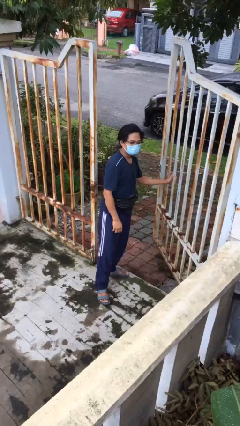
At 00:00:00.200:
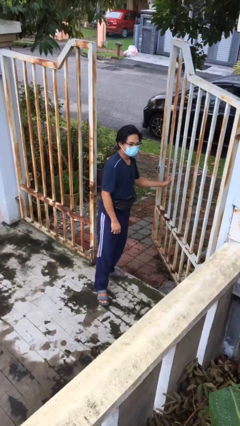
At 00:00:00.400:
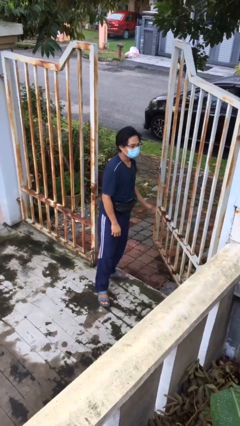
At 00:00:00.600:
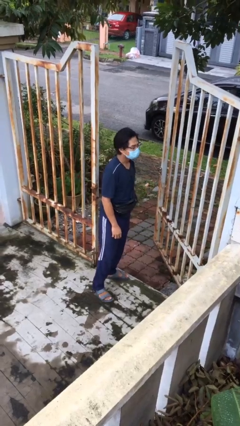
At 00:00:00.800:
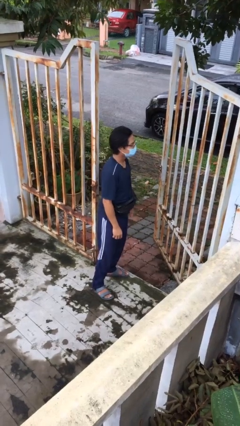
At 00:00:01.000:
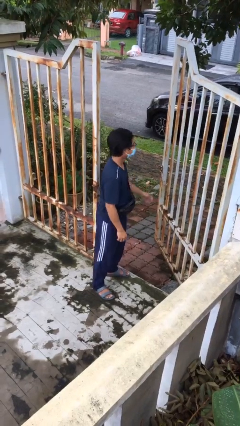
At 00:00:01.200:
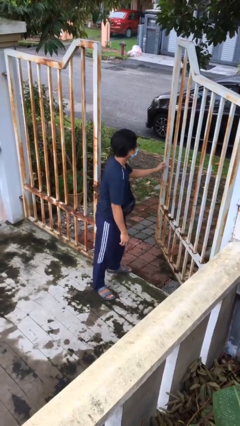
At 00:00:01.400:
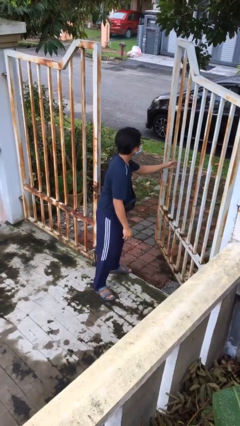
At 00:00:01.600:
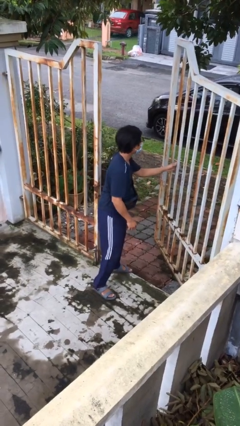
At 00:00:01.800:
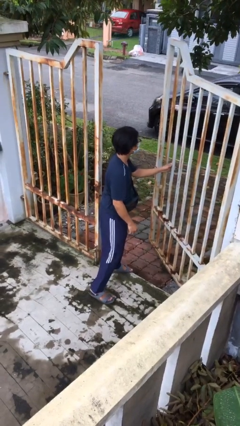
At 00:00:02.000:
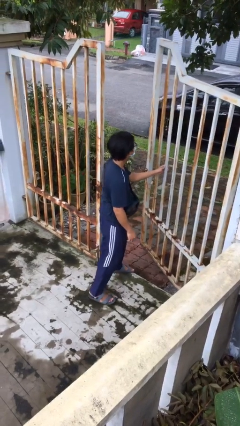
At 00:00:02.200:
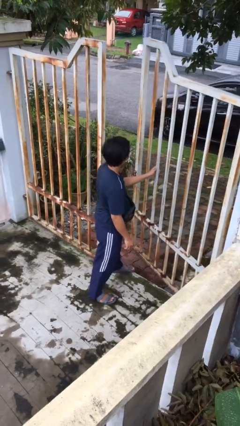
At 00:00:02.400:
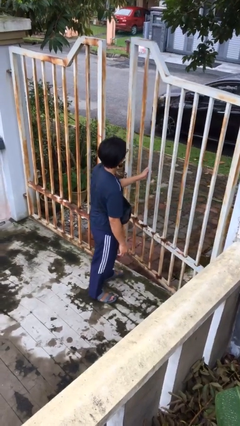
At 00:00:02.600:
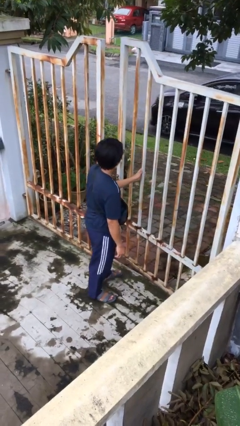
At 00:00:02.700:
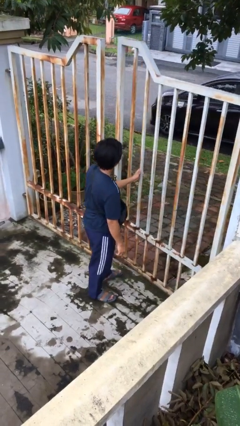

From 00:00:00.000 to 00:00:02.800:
person closes facility door

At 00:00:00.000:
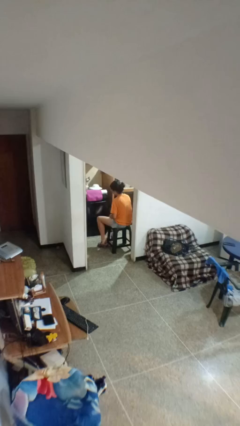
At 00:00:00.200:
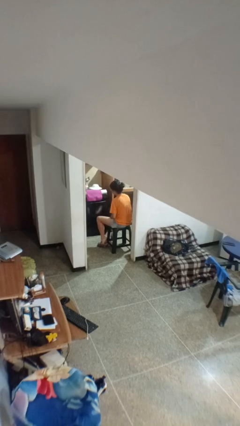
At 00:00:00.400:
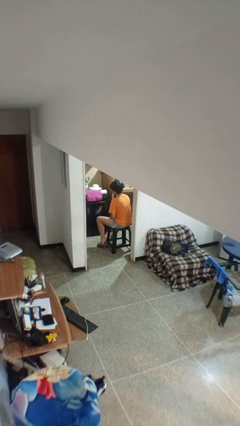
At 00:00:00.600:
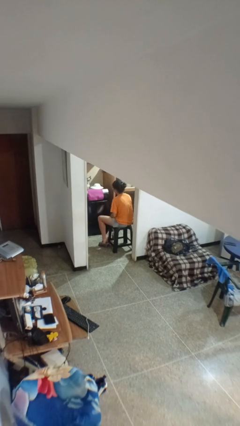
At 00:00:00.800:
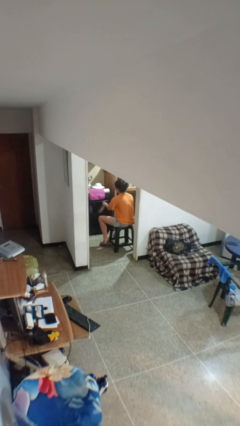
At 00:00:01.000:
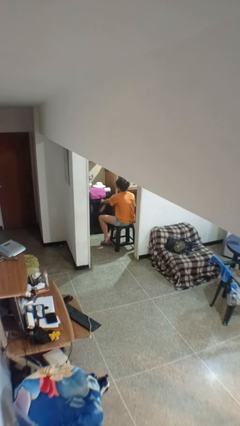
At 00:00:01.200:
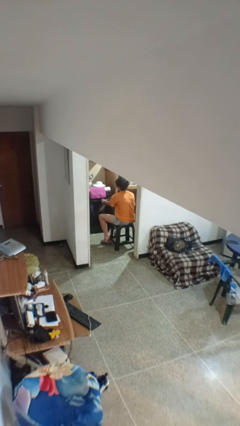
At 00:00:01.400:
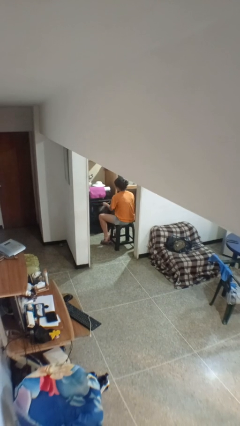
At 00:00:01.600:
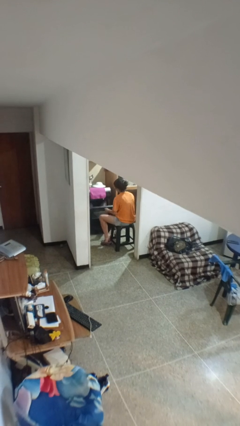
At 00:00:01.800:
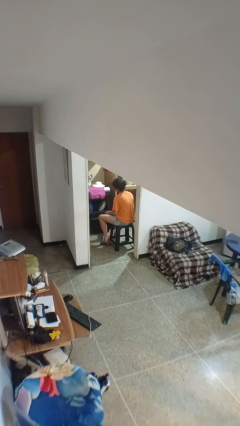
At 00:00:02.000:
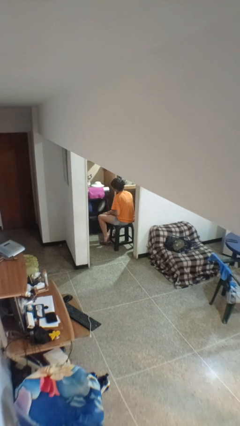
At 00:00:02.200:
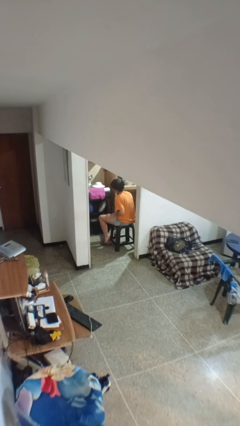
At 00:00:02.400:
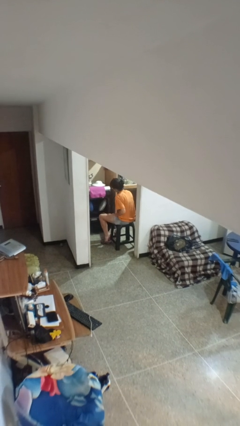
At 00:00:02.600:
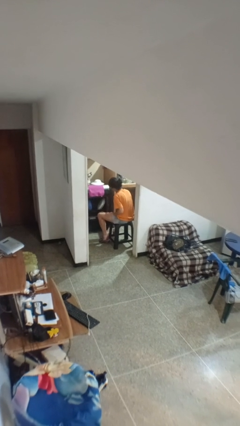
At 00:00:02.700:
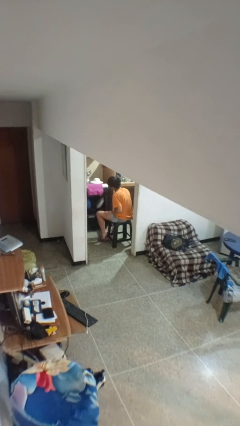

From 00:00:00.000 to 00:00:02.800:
person opens dishwasher

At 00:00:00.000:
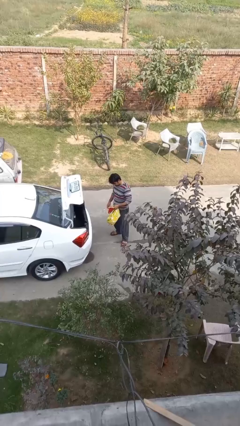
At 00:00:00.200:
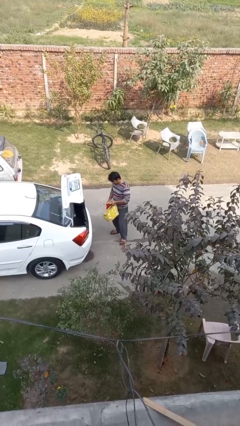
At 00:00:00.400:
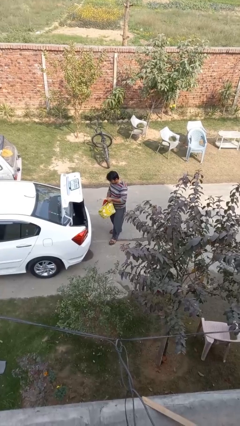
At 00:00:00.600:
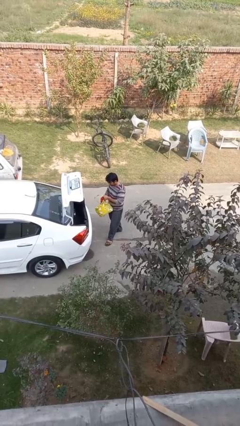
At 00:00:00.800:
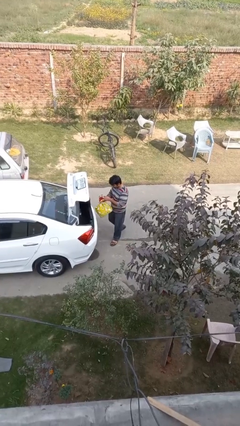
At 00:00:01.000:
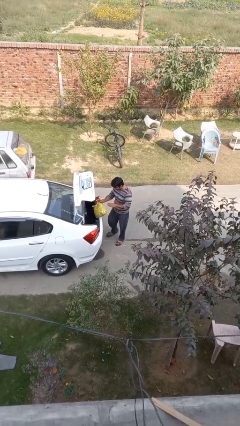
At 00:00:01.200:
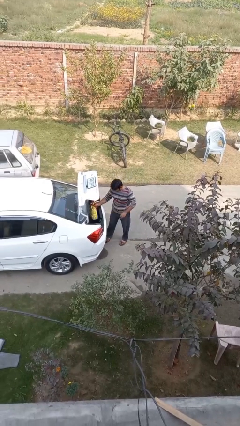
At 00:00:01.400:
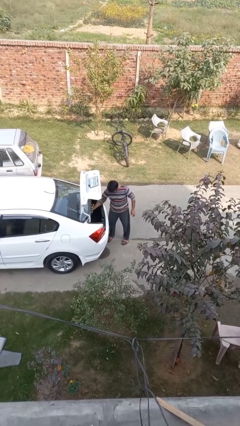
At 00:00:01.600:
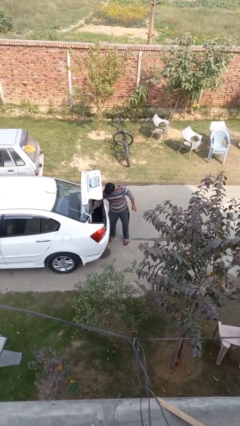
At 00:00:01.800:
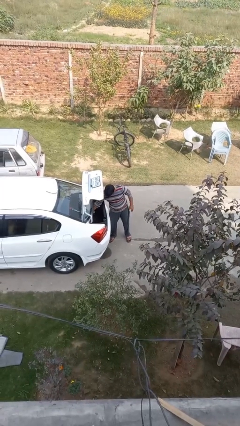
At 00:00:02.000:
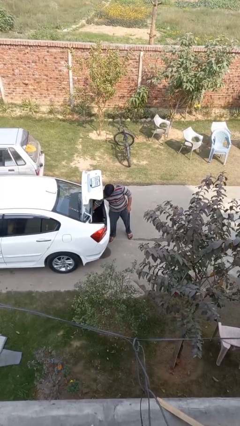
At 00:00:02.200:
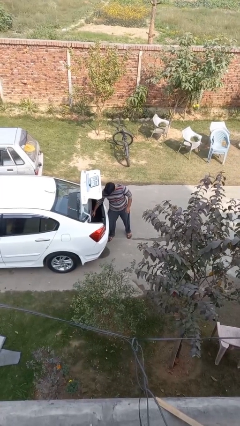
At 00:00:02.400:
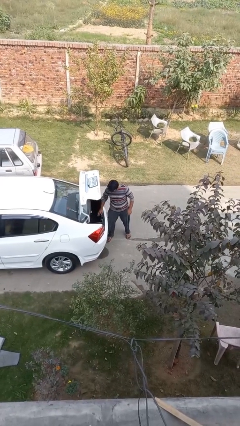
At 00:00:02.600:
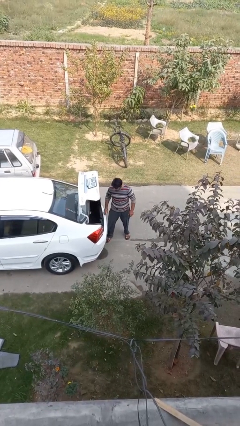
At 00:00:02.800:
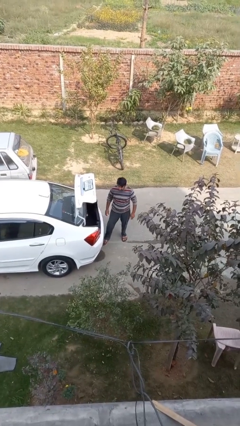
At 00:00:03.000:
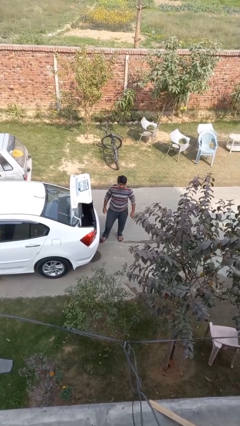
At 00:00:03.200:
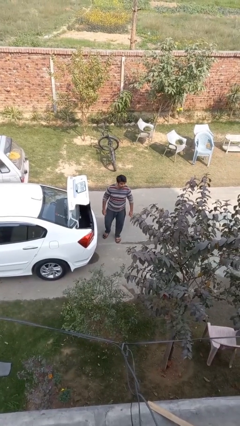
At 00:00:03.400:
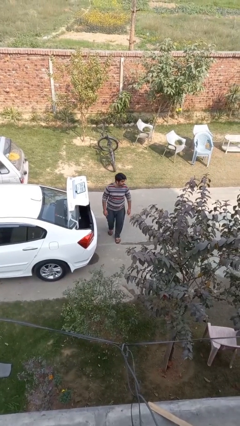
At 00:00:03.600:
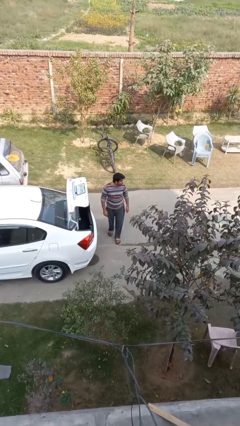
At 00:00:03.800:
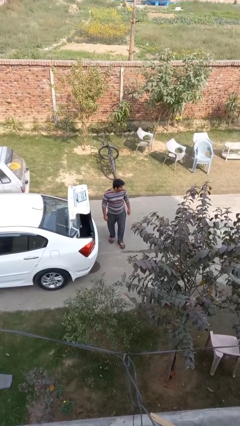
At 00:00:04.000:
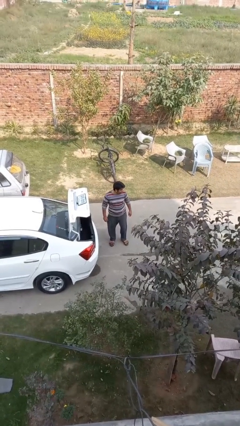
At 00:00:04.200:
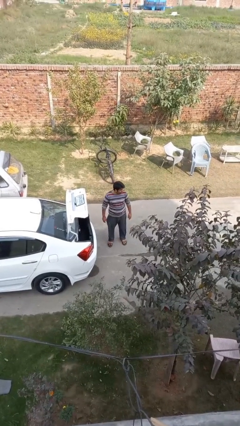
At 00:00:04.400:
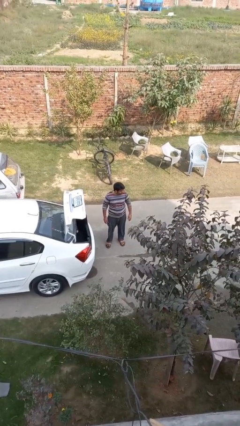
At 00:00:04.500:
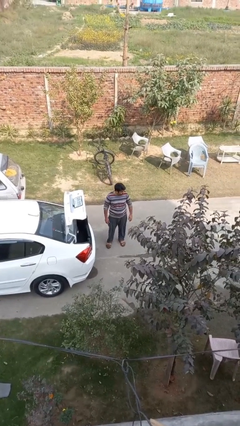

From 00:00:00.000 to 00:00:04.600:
person loads car

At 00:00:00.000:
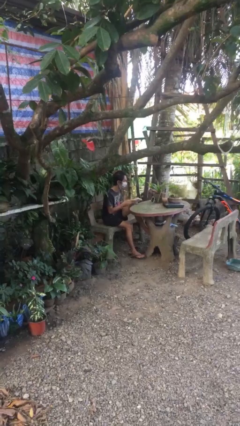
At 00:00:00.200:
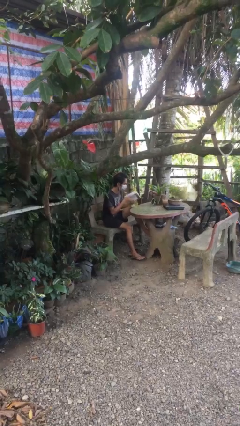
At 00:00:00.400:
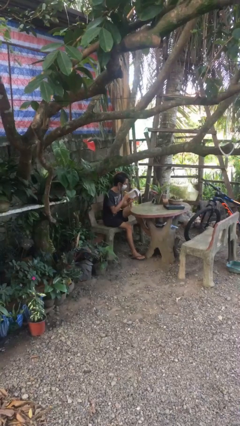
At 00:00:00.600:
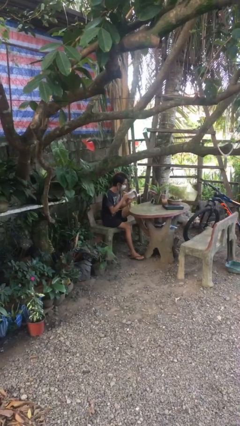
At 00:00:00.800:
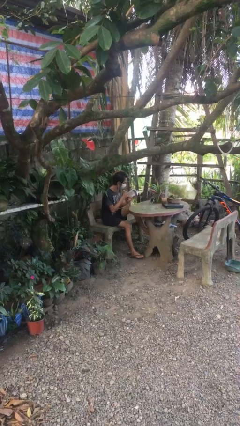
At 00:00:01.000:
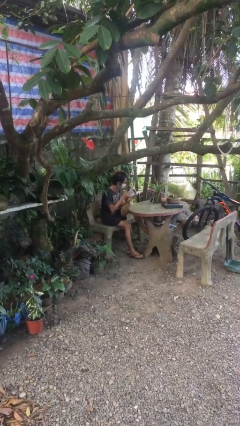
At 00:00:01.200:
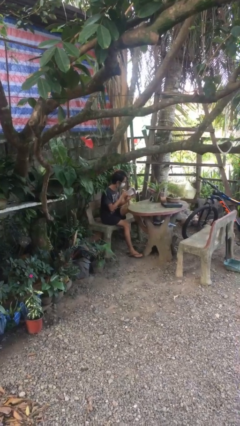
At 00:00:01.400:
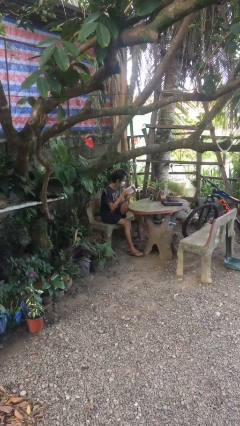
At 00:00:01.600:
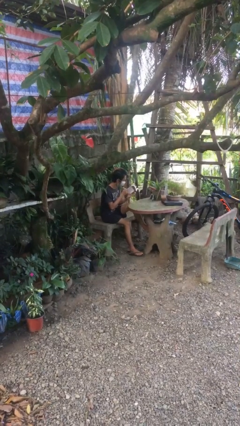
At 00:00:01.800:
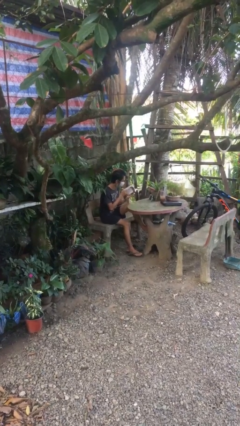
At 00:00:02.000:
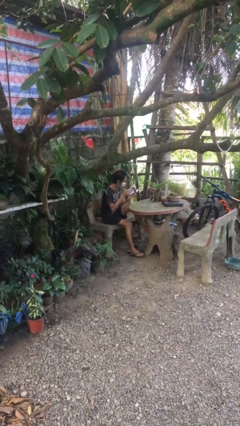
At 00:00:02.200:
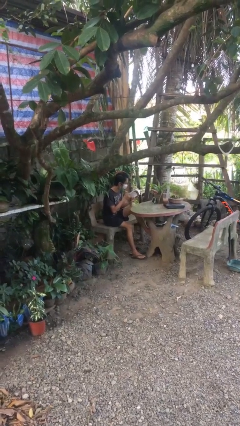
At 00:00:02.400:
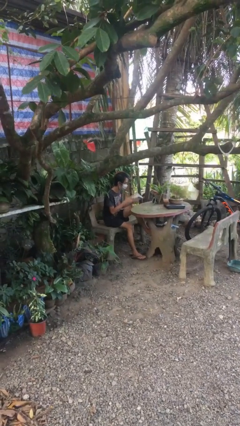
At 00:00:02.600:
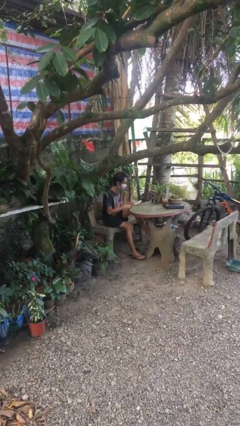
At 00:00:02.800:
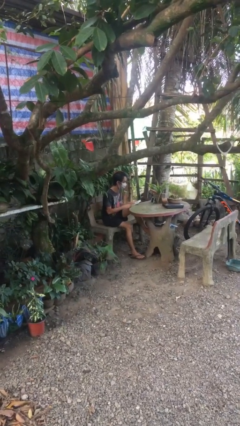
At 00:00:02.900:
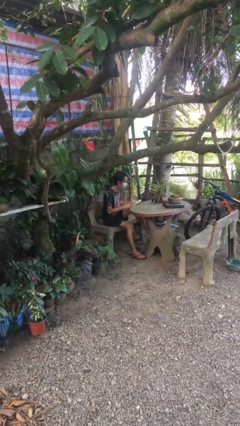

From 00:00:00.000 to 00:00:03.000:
person reads document

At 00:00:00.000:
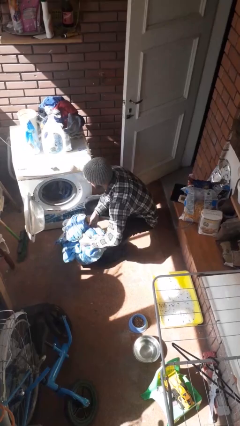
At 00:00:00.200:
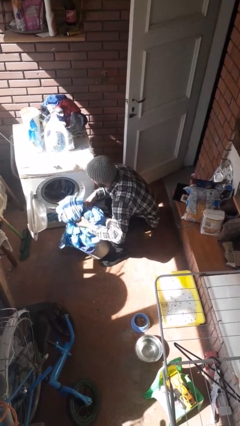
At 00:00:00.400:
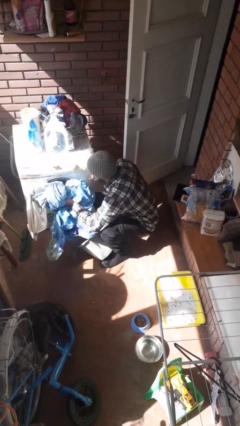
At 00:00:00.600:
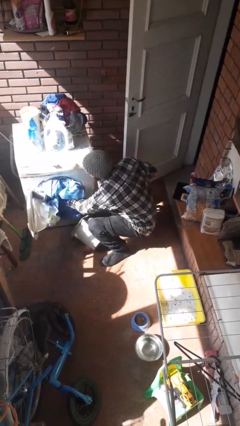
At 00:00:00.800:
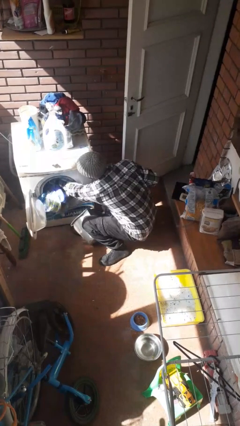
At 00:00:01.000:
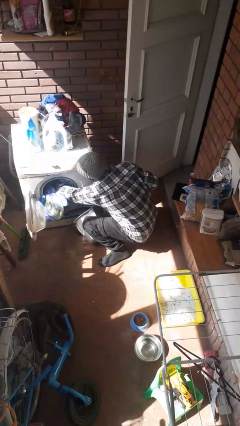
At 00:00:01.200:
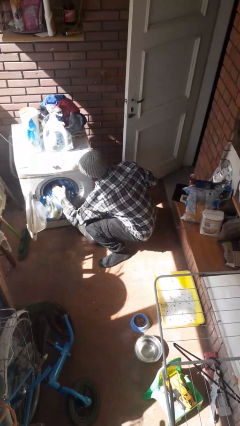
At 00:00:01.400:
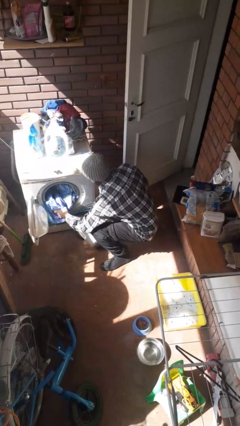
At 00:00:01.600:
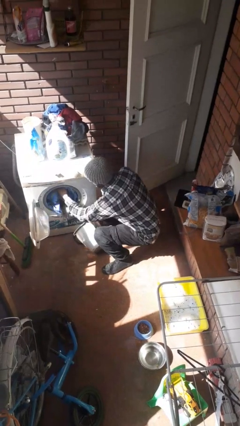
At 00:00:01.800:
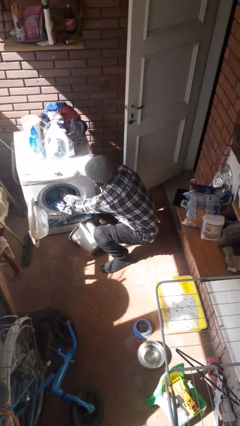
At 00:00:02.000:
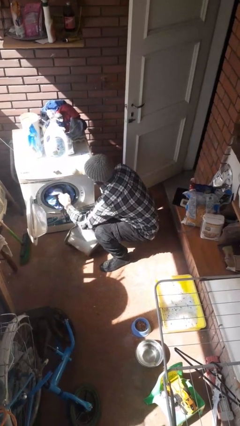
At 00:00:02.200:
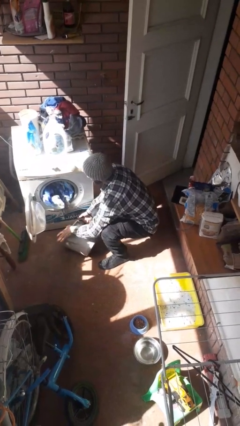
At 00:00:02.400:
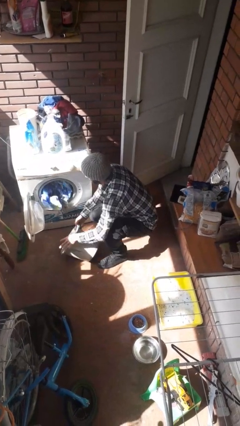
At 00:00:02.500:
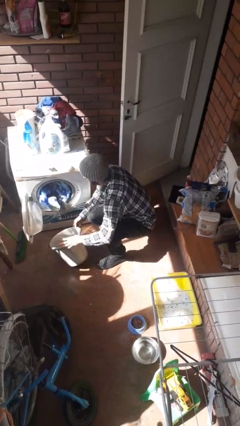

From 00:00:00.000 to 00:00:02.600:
person loads clotheswasher

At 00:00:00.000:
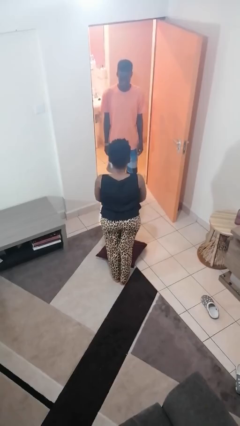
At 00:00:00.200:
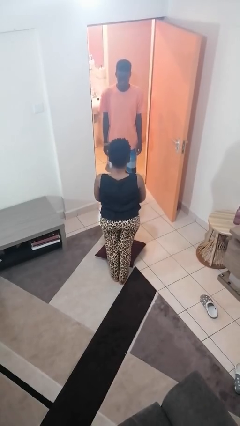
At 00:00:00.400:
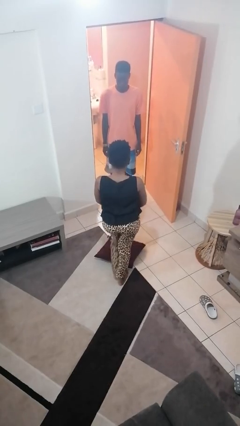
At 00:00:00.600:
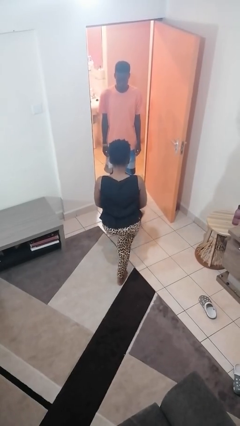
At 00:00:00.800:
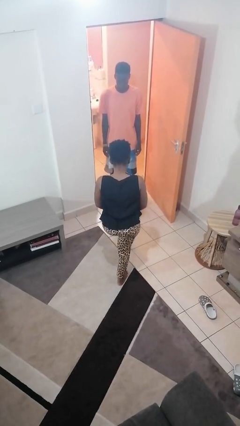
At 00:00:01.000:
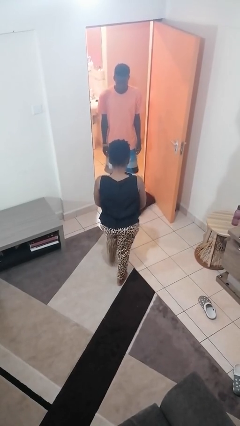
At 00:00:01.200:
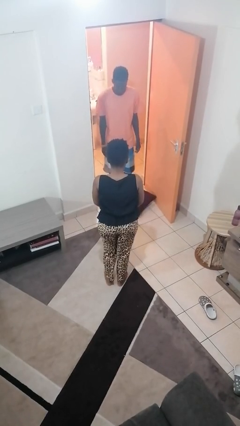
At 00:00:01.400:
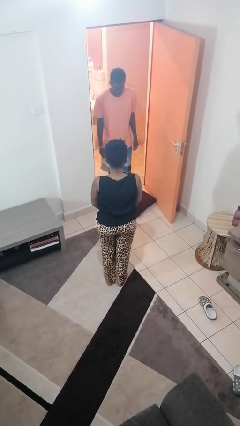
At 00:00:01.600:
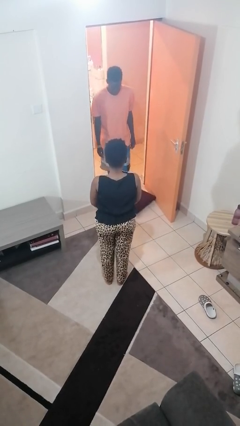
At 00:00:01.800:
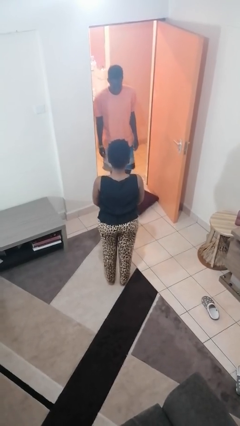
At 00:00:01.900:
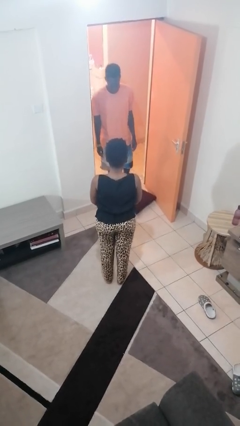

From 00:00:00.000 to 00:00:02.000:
person kicks object to person
